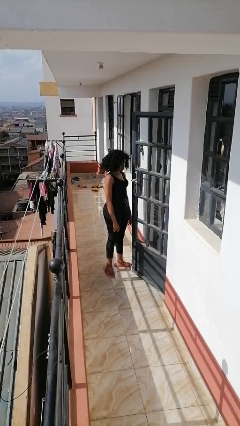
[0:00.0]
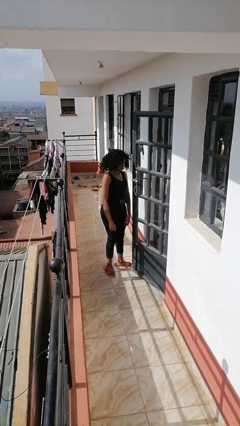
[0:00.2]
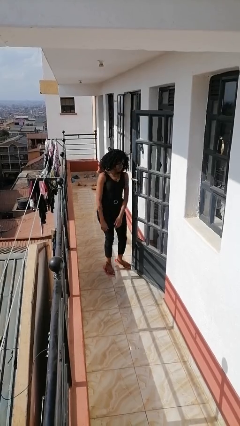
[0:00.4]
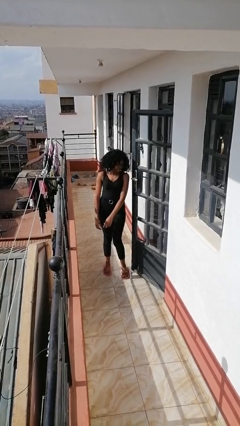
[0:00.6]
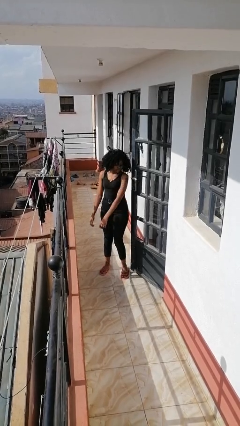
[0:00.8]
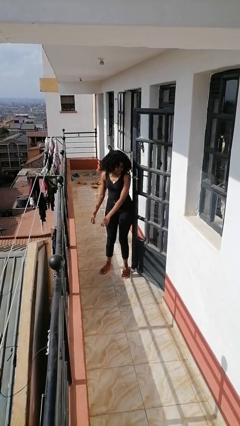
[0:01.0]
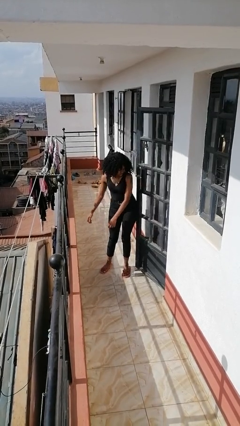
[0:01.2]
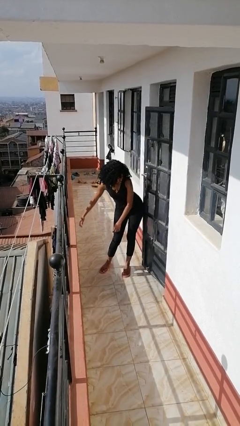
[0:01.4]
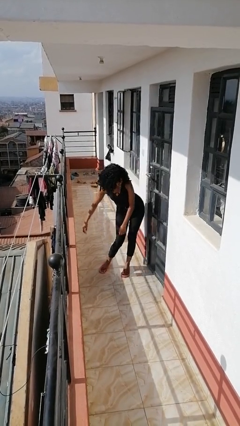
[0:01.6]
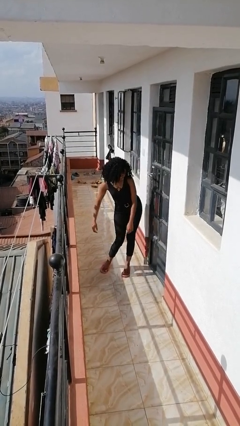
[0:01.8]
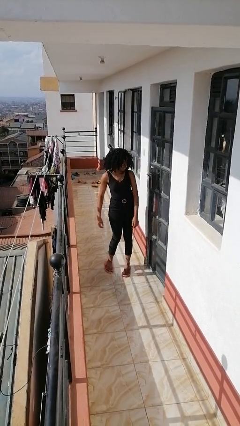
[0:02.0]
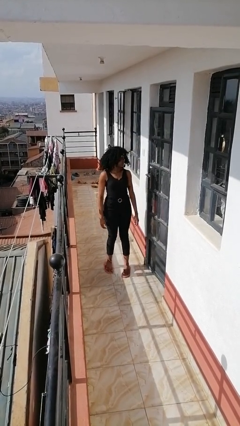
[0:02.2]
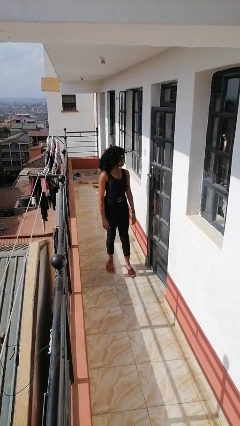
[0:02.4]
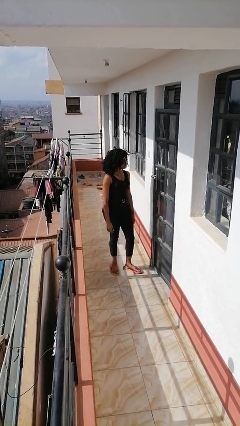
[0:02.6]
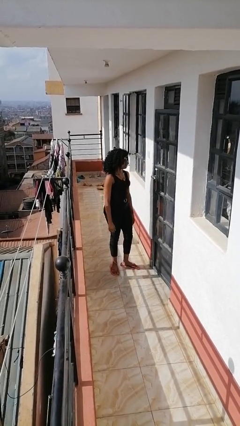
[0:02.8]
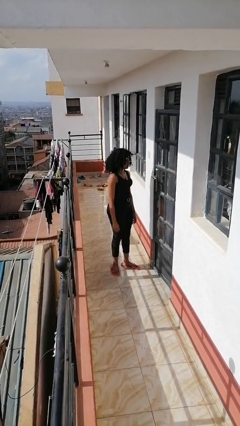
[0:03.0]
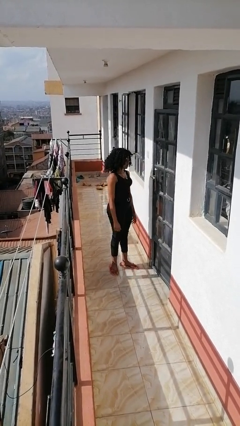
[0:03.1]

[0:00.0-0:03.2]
person closes door with hip

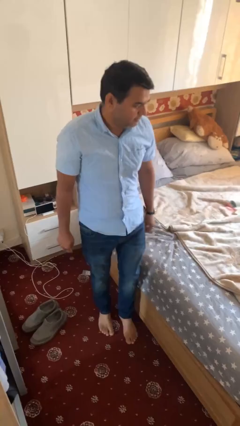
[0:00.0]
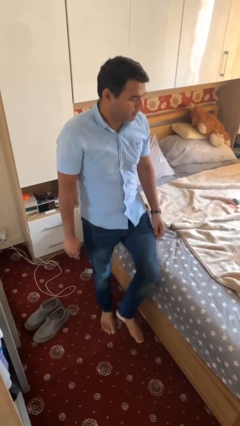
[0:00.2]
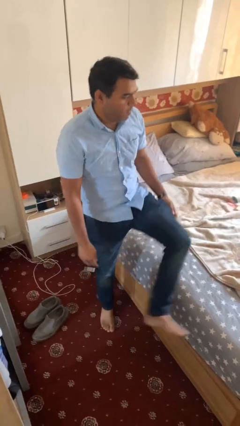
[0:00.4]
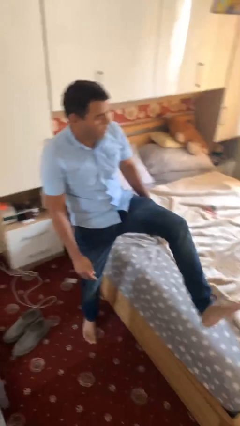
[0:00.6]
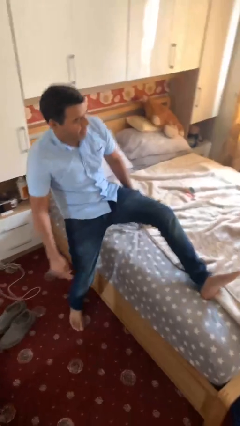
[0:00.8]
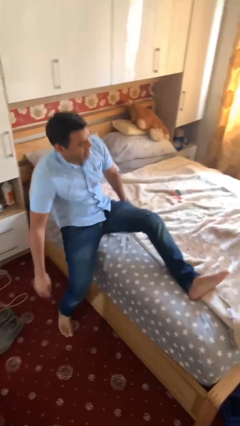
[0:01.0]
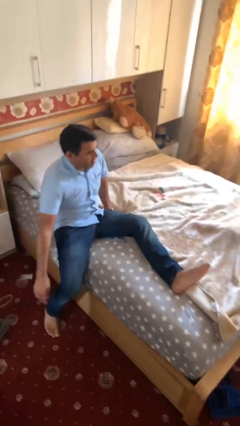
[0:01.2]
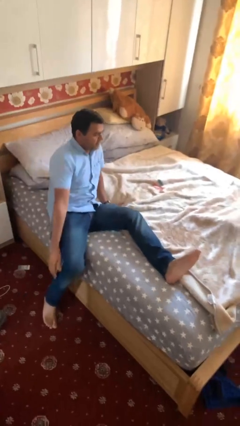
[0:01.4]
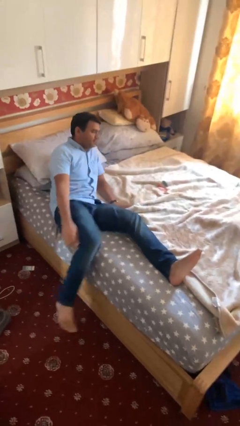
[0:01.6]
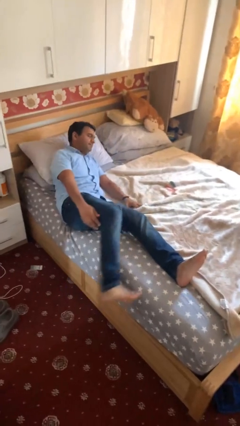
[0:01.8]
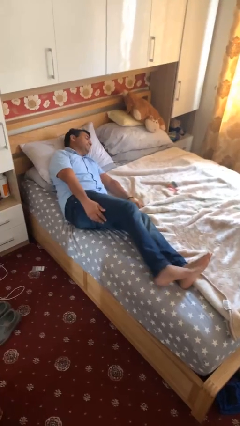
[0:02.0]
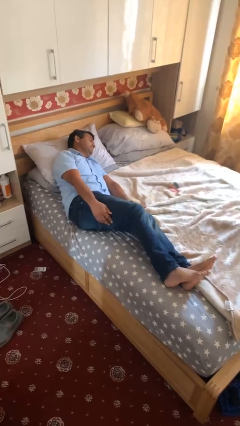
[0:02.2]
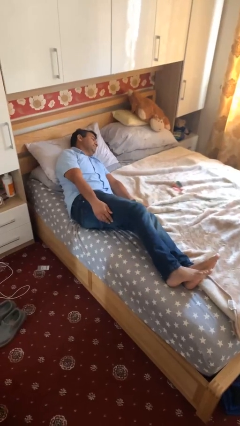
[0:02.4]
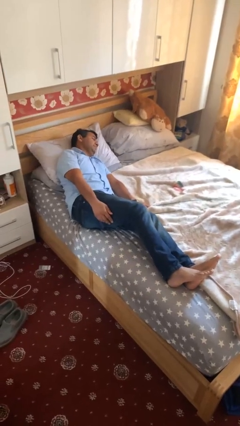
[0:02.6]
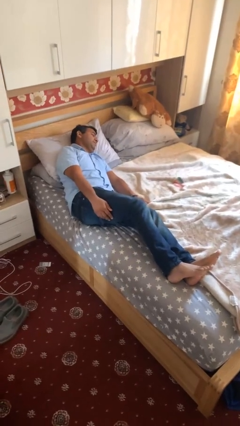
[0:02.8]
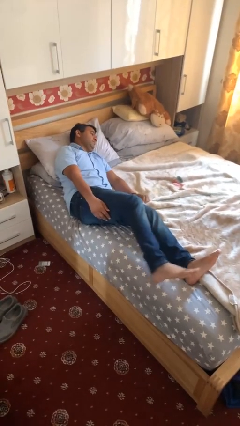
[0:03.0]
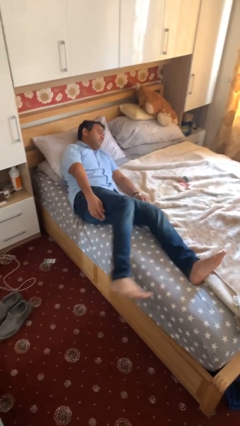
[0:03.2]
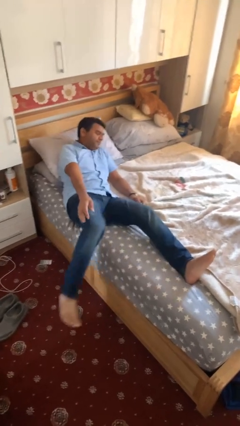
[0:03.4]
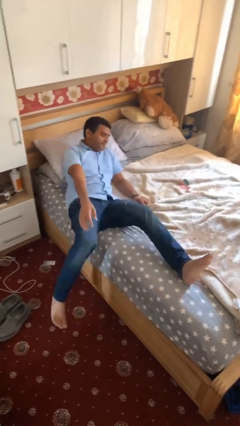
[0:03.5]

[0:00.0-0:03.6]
person lies down on bed

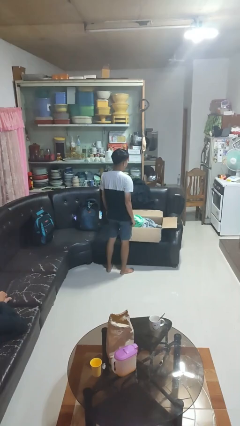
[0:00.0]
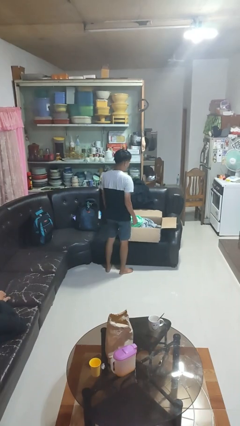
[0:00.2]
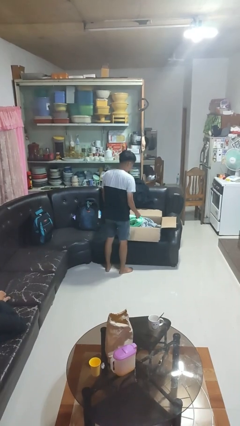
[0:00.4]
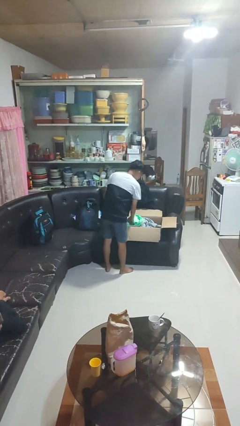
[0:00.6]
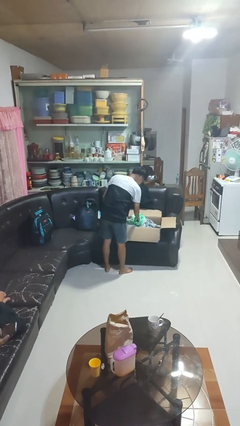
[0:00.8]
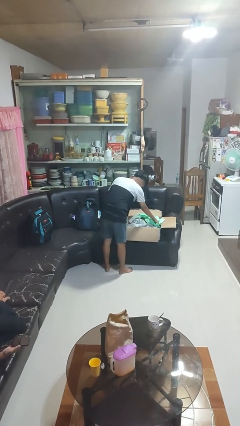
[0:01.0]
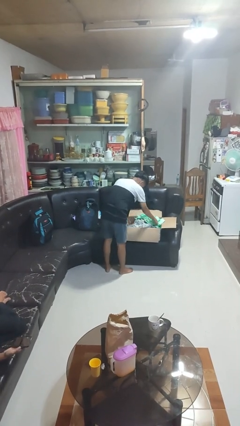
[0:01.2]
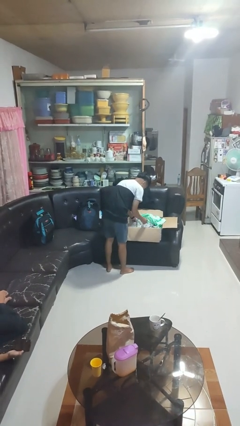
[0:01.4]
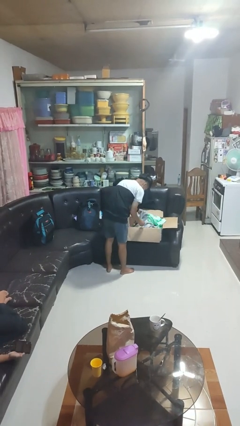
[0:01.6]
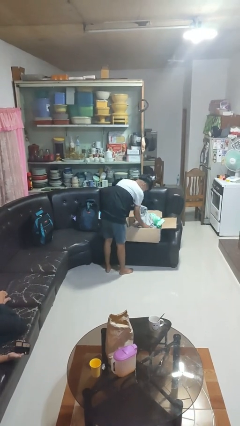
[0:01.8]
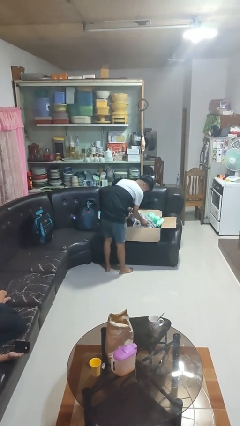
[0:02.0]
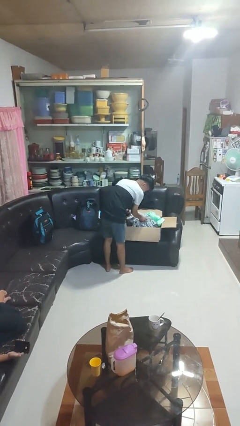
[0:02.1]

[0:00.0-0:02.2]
person searches in box

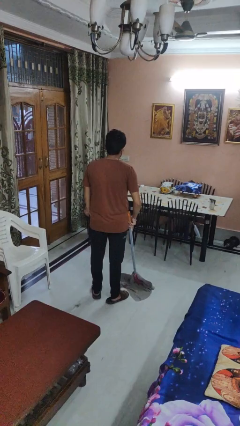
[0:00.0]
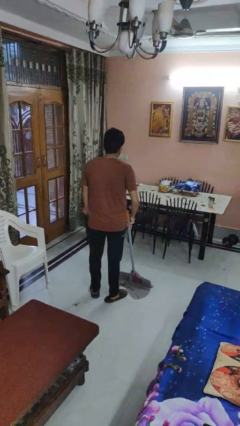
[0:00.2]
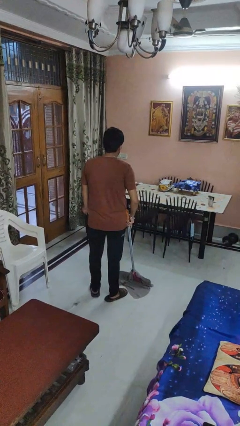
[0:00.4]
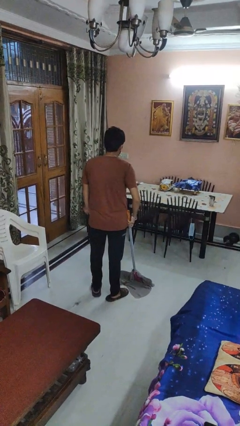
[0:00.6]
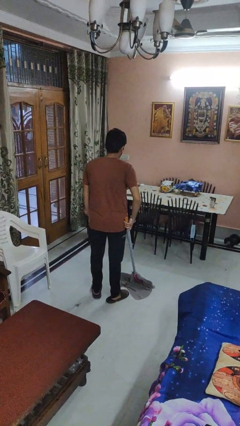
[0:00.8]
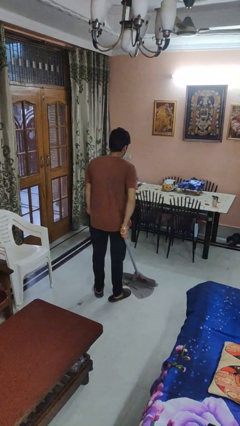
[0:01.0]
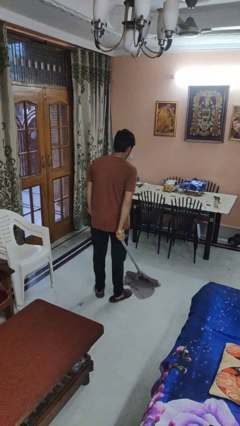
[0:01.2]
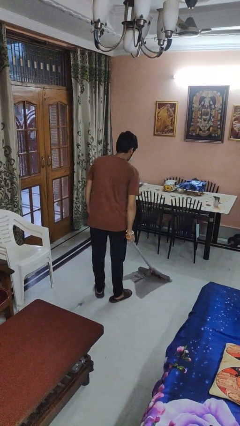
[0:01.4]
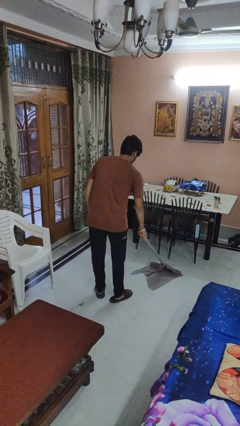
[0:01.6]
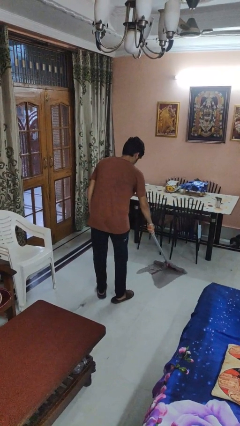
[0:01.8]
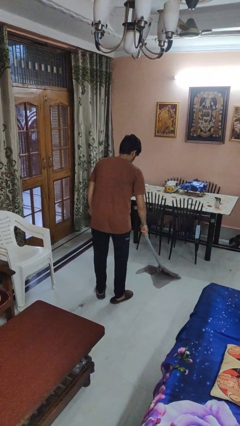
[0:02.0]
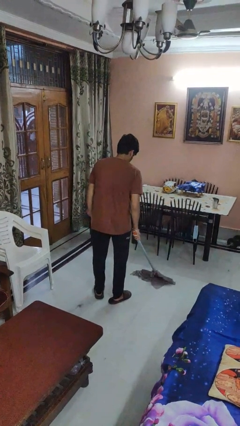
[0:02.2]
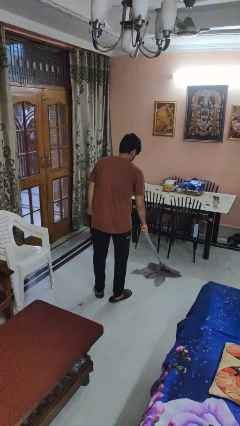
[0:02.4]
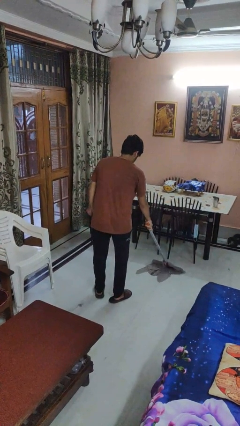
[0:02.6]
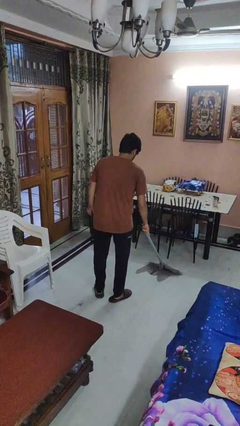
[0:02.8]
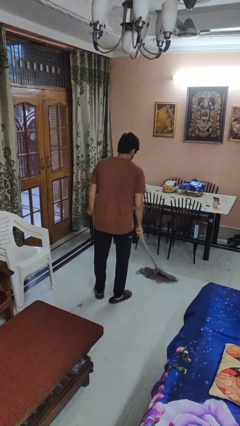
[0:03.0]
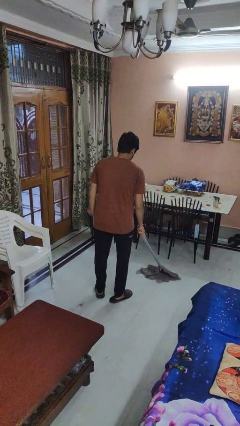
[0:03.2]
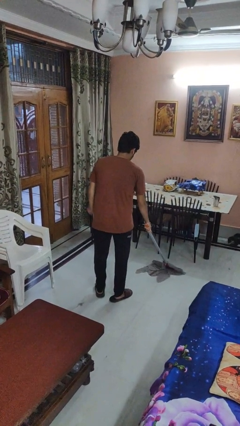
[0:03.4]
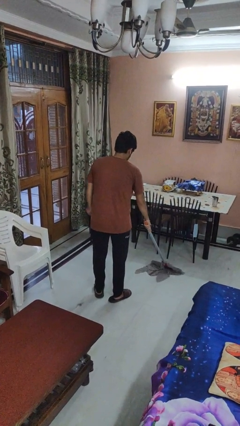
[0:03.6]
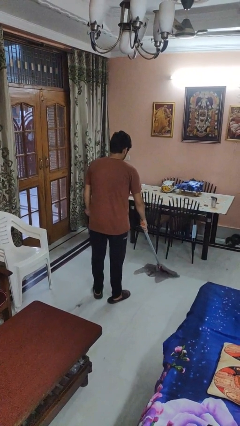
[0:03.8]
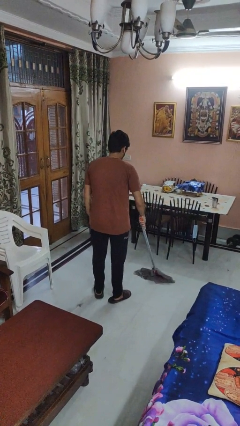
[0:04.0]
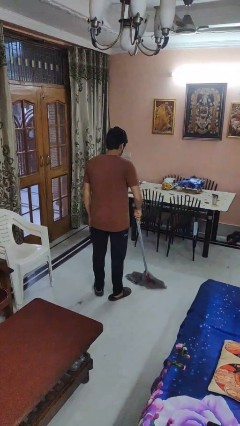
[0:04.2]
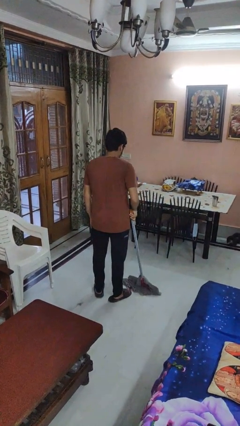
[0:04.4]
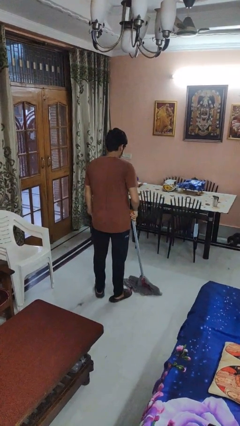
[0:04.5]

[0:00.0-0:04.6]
person mops

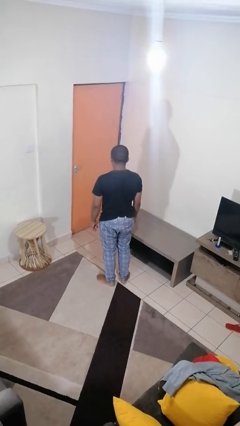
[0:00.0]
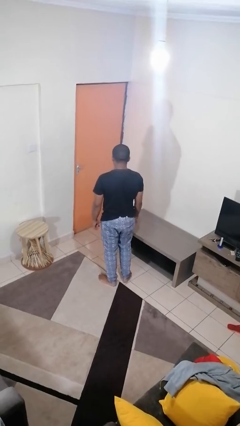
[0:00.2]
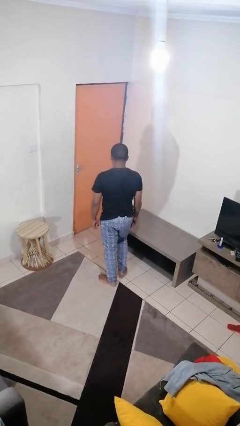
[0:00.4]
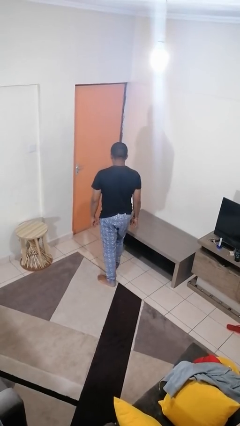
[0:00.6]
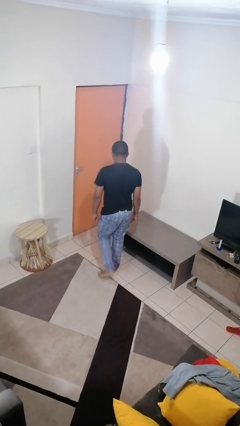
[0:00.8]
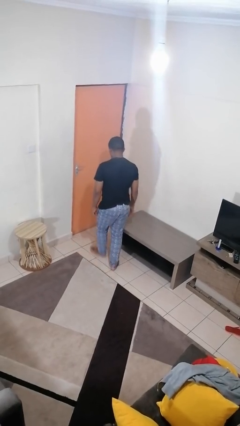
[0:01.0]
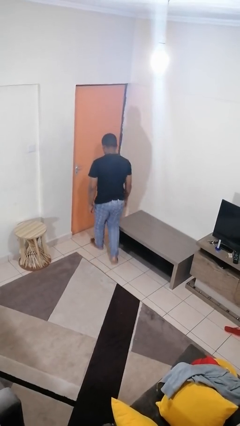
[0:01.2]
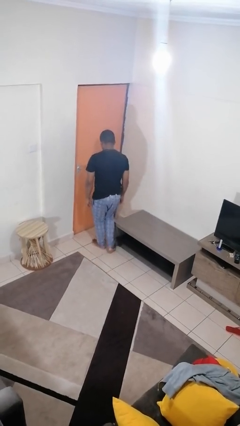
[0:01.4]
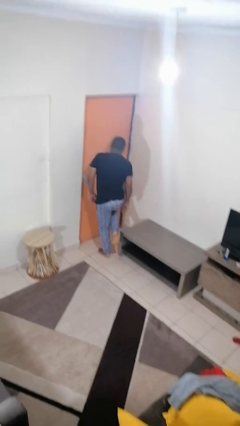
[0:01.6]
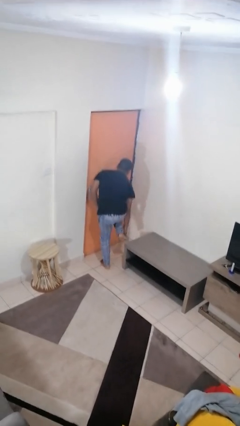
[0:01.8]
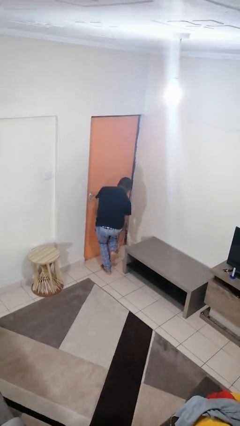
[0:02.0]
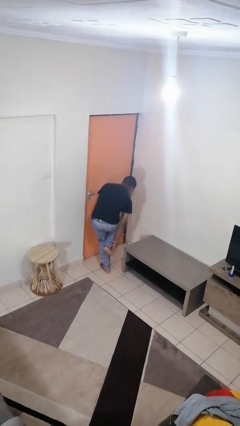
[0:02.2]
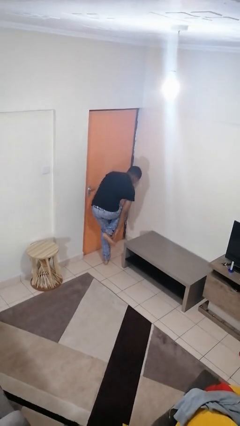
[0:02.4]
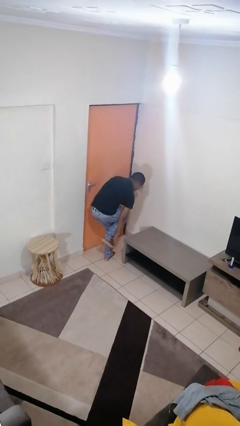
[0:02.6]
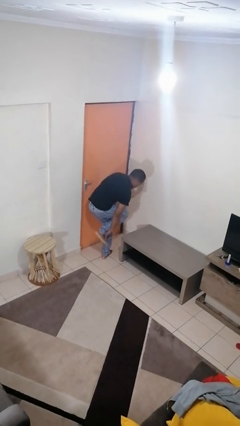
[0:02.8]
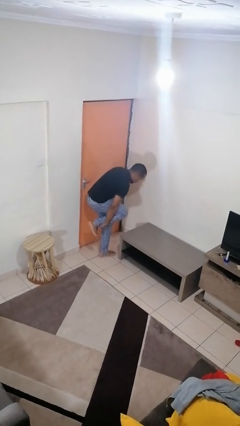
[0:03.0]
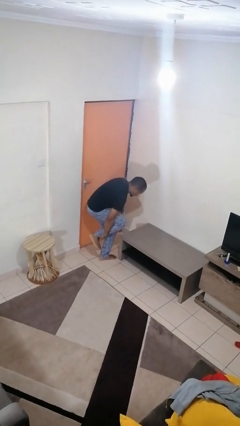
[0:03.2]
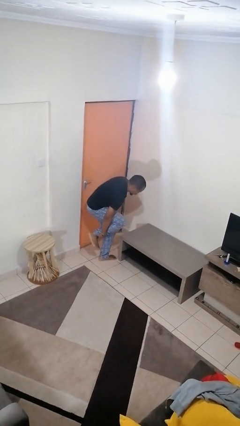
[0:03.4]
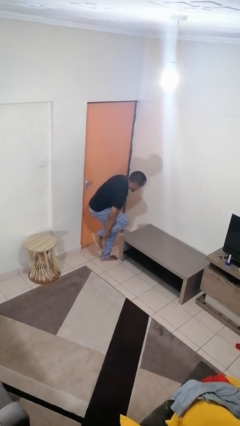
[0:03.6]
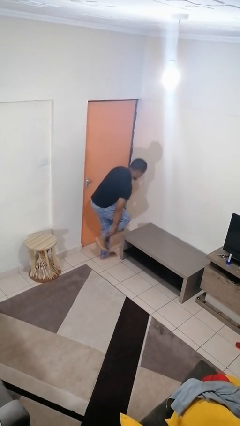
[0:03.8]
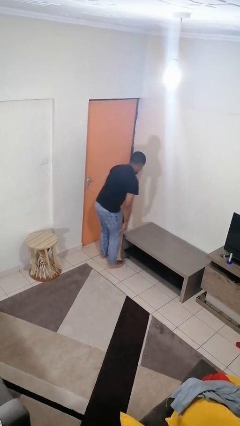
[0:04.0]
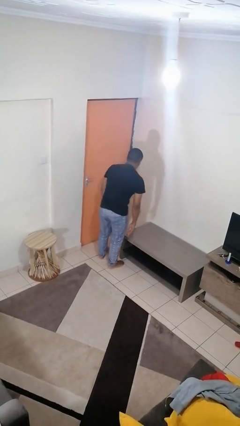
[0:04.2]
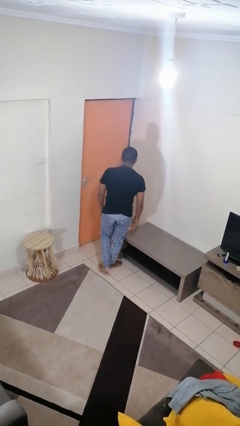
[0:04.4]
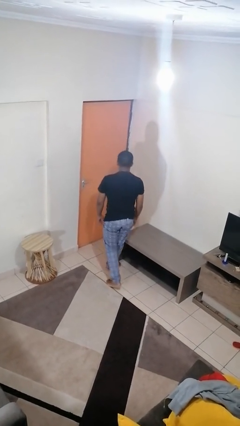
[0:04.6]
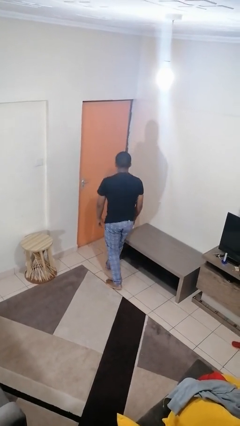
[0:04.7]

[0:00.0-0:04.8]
person stubs toe
